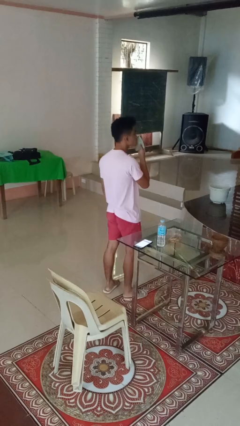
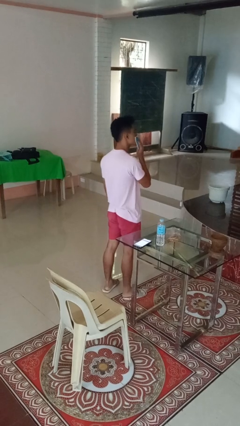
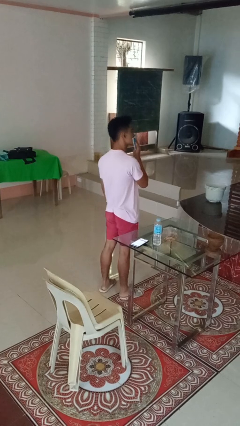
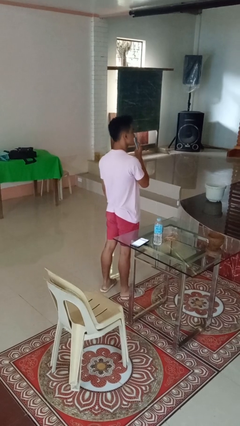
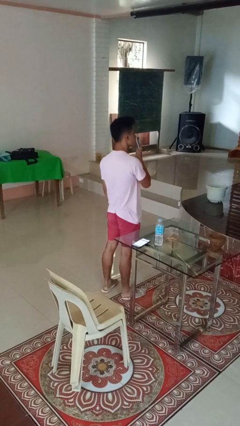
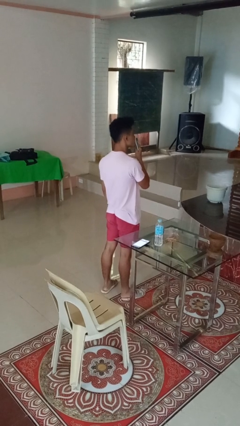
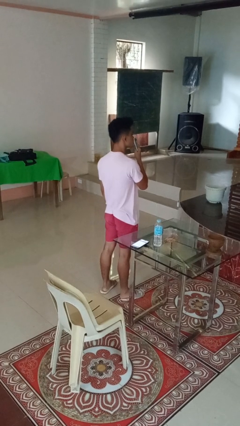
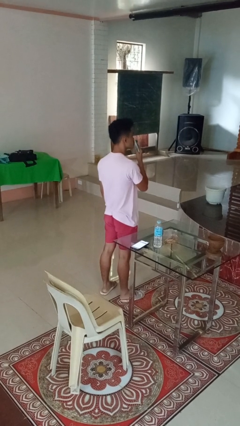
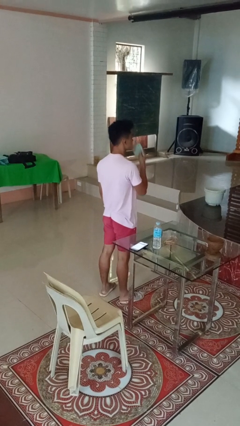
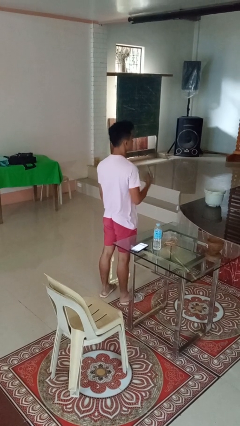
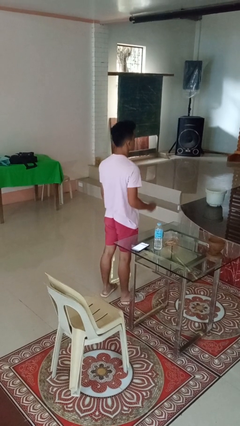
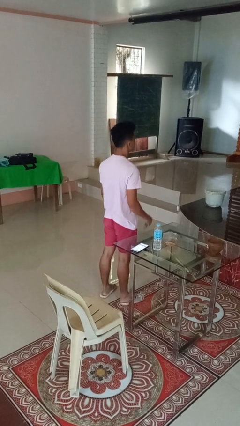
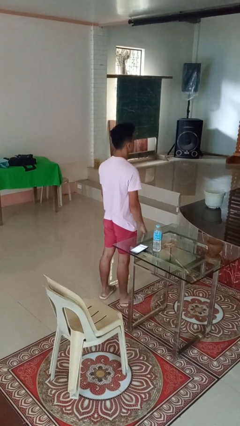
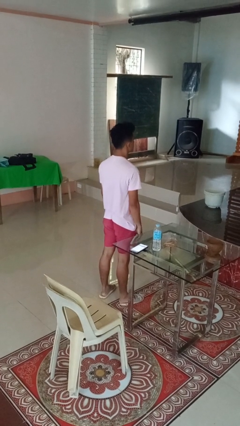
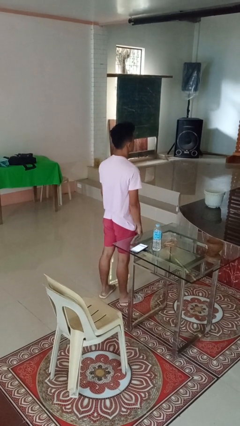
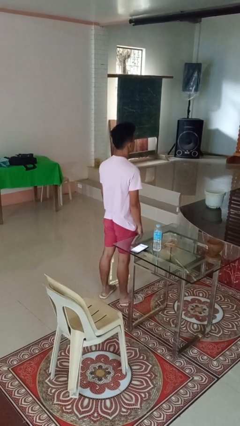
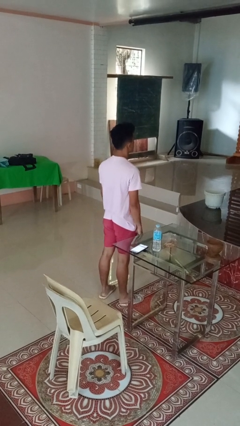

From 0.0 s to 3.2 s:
person wipes mouth with napkin

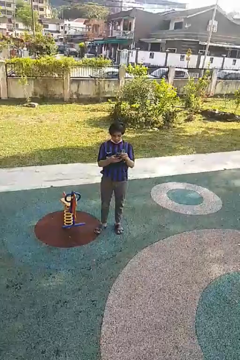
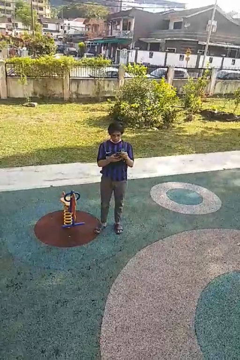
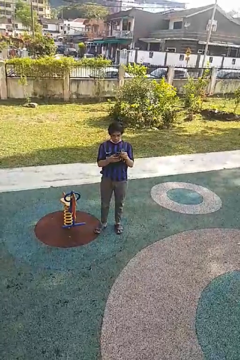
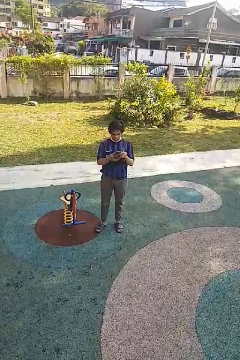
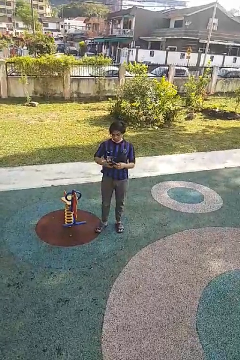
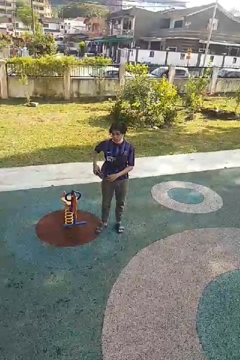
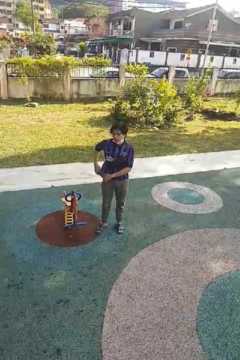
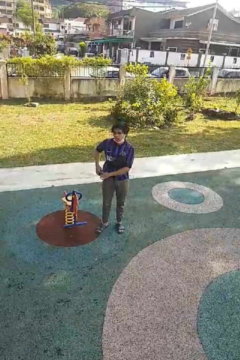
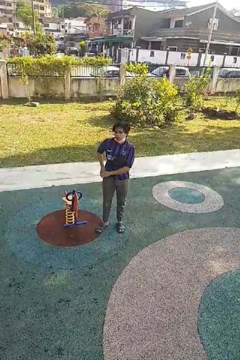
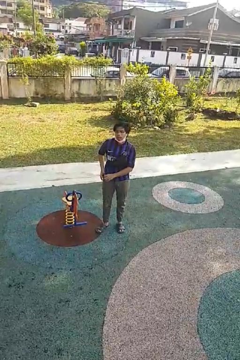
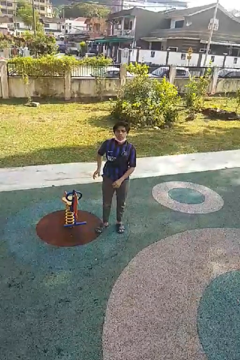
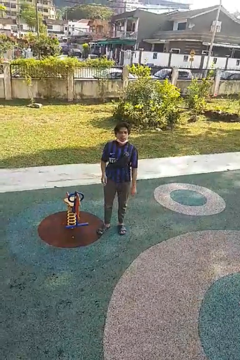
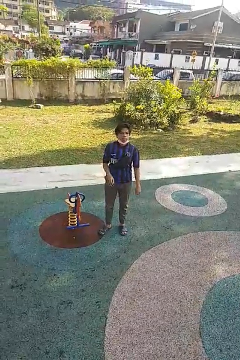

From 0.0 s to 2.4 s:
person puts phone into pocket

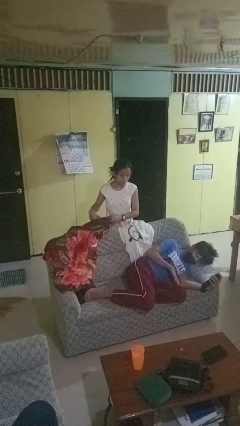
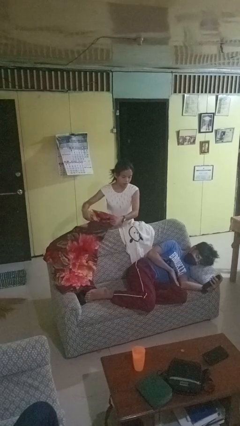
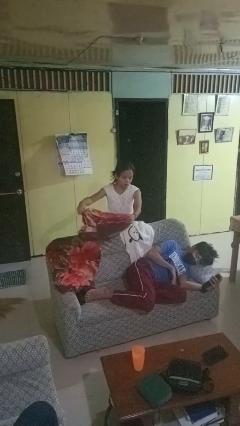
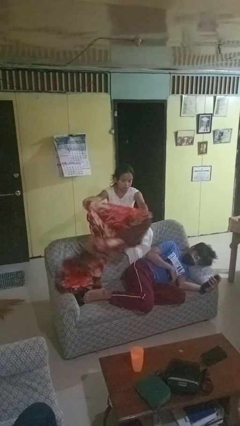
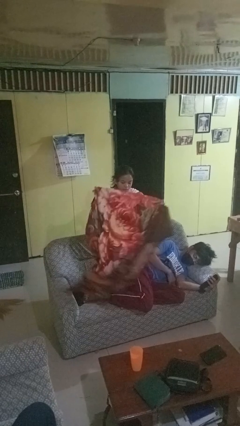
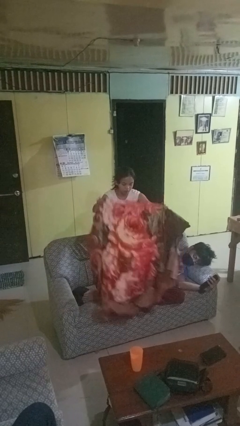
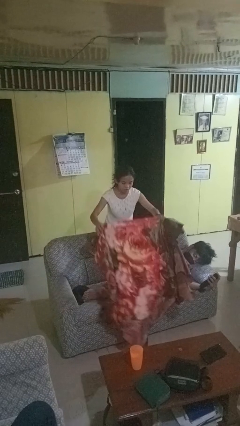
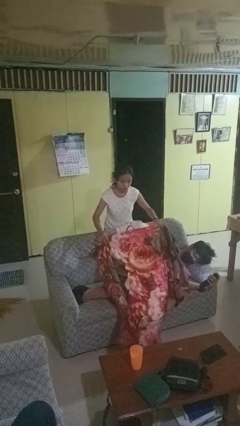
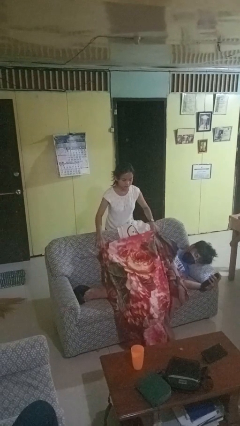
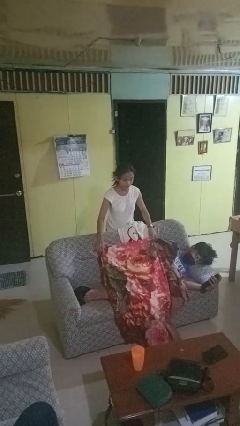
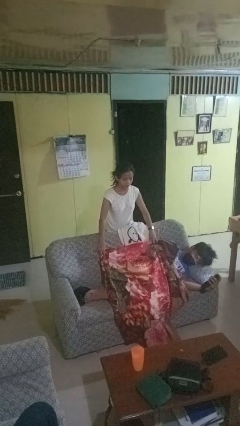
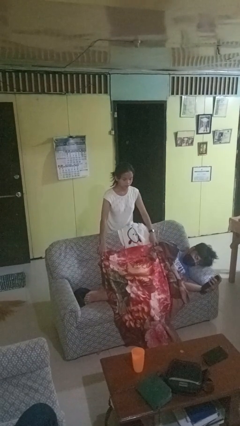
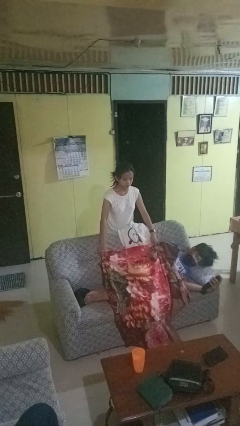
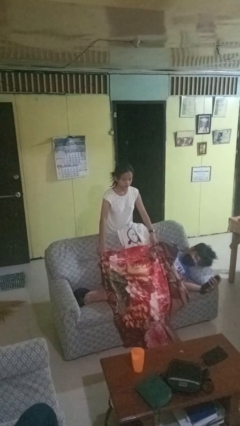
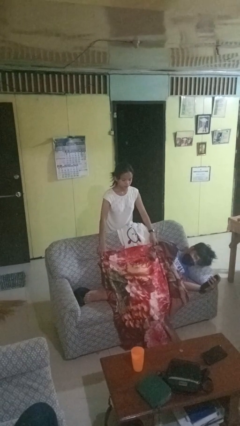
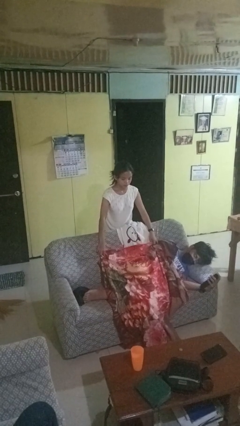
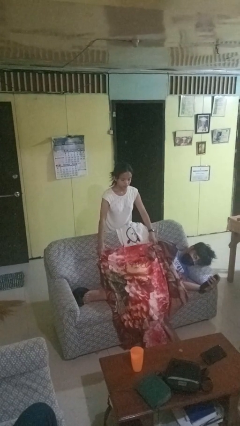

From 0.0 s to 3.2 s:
person covers friend with blanket

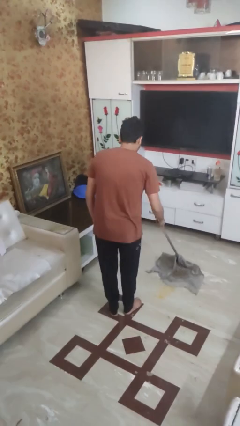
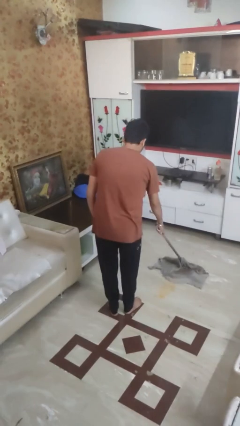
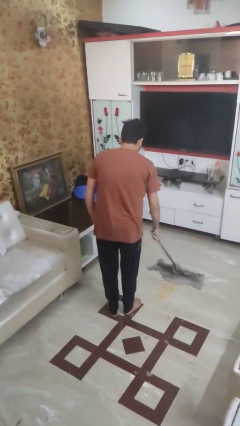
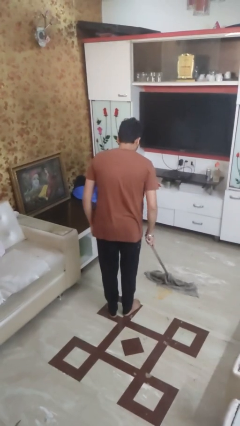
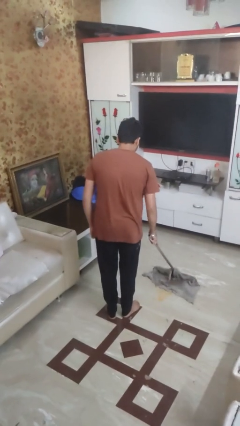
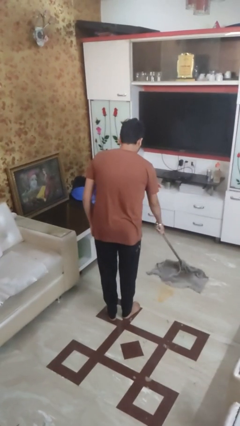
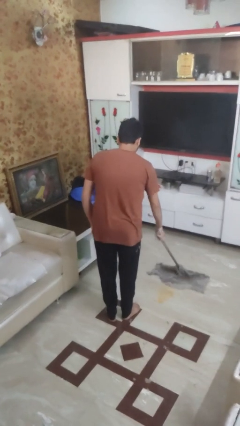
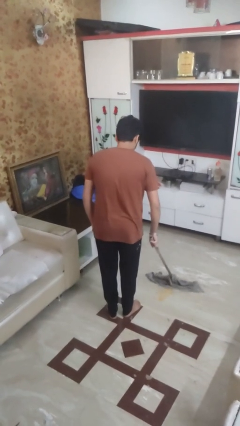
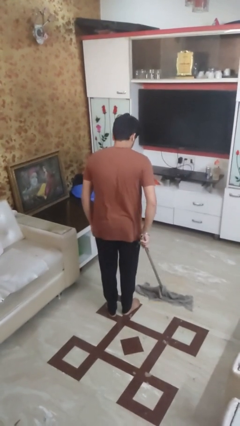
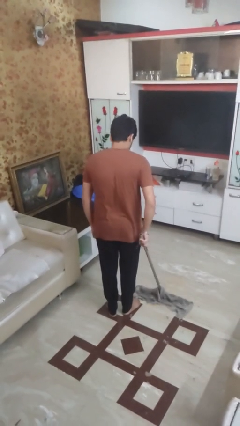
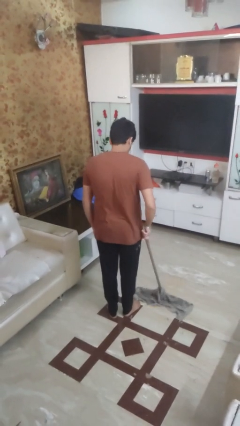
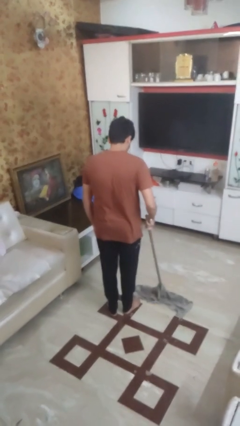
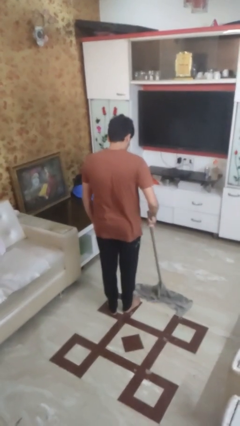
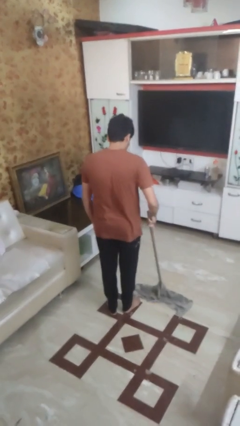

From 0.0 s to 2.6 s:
person mops

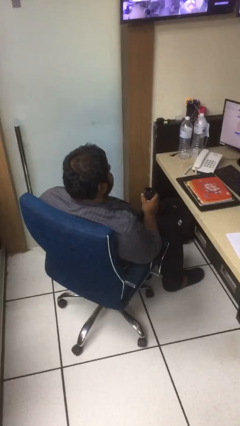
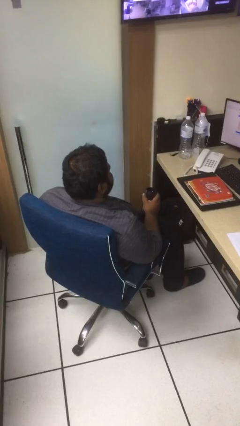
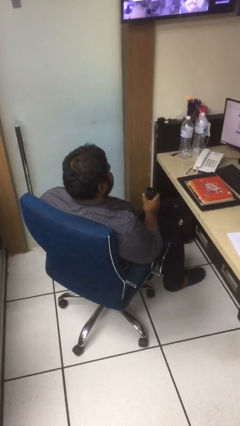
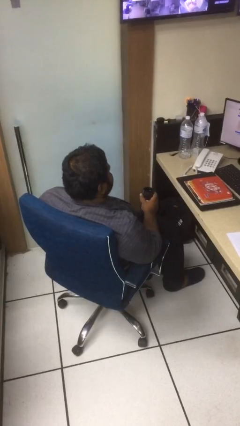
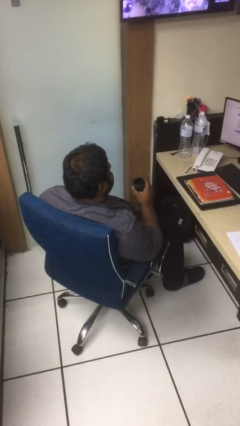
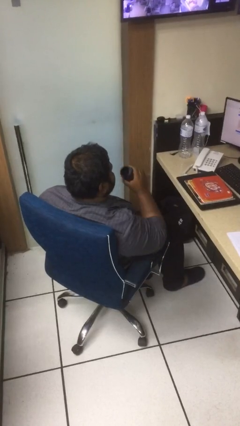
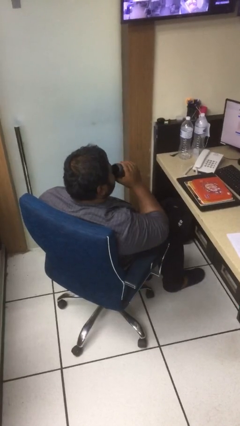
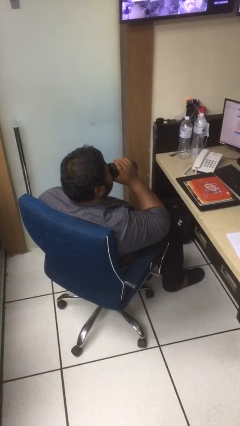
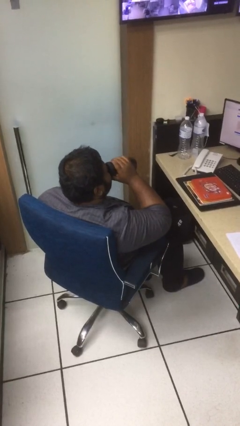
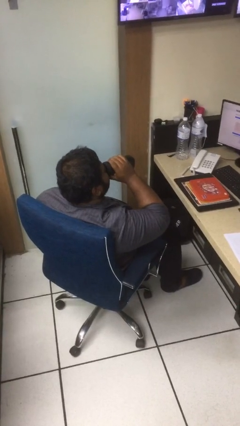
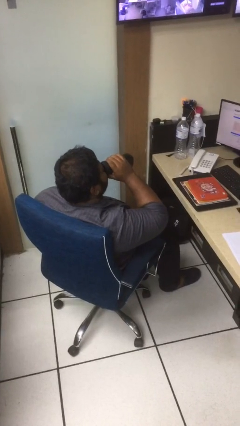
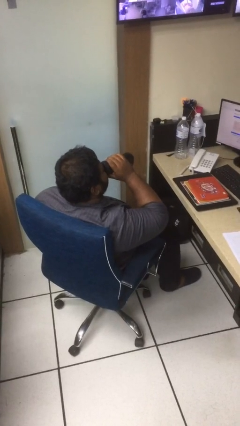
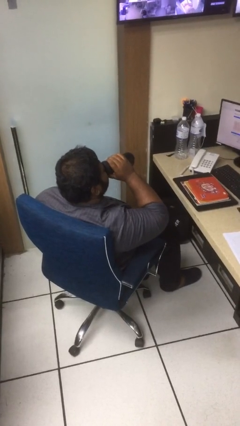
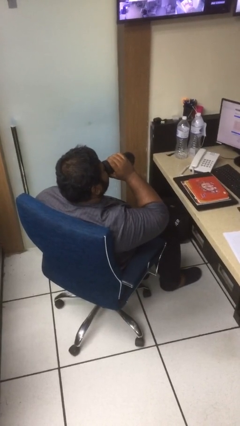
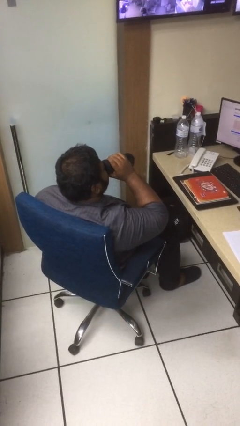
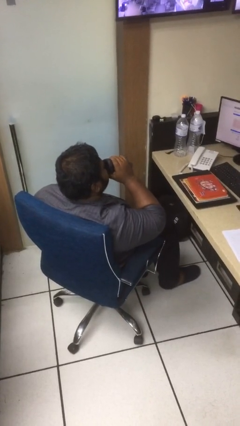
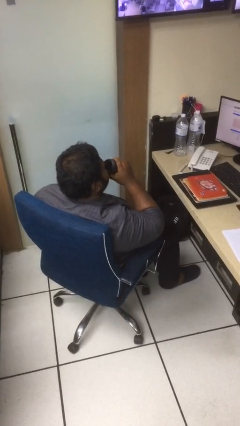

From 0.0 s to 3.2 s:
person drinks from bottle

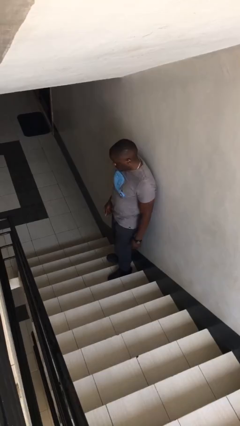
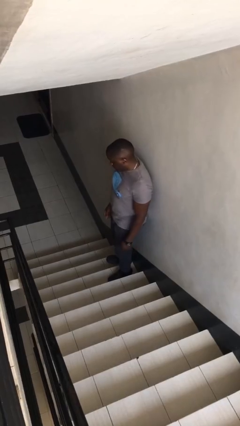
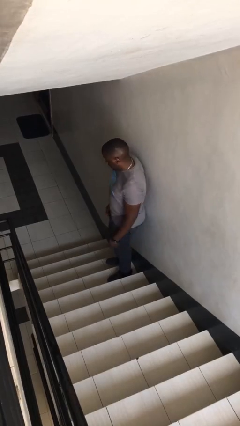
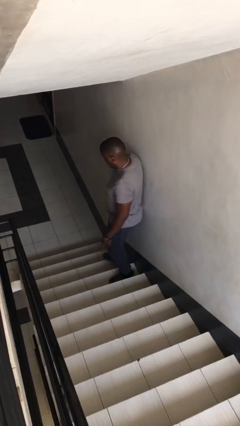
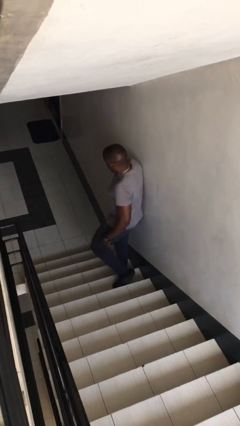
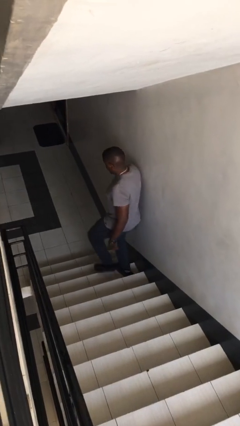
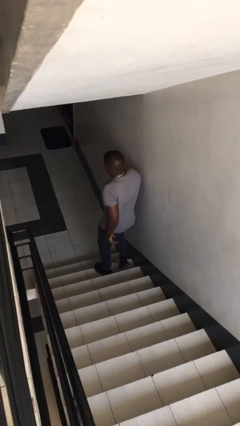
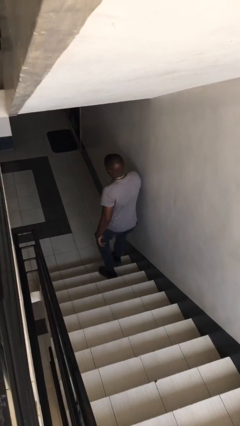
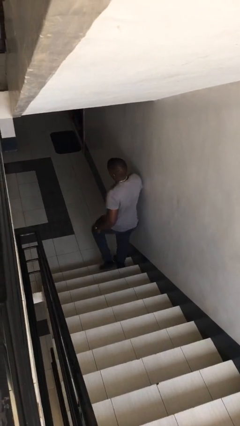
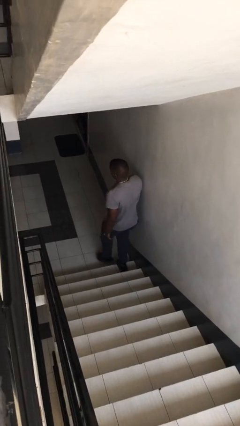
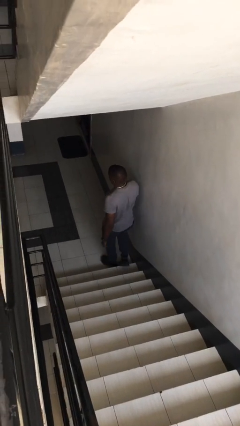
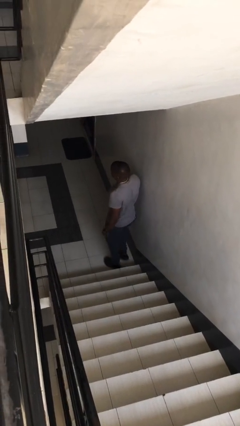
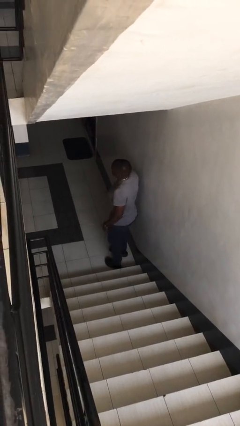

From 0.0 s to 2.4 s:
person climbs down stairs

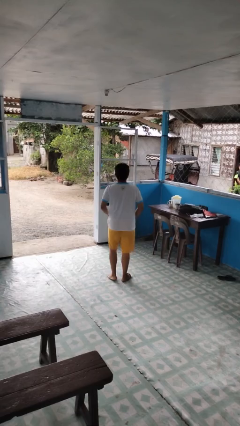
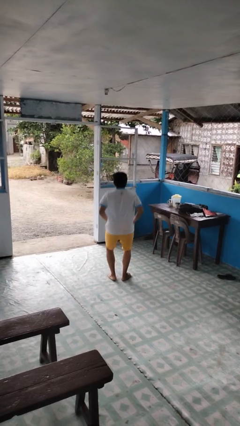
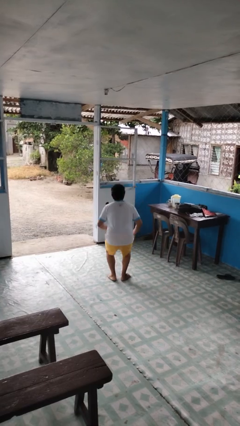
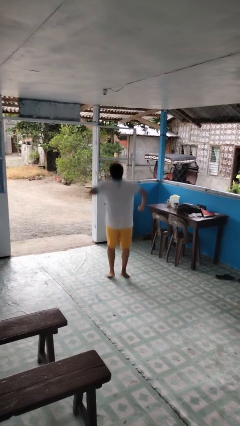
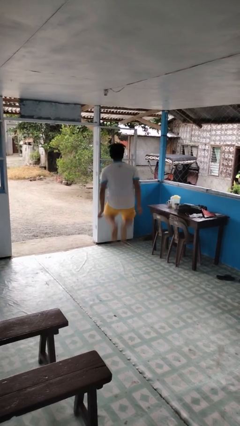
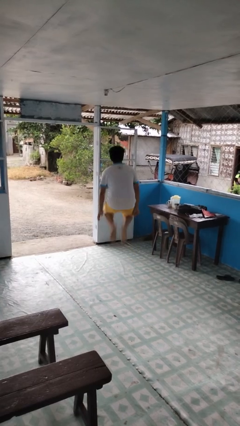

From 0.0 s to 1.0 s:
person jumps
